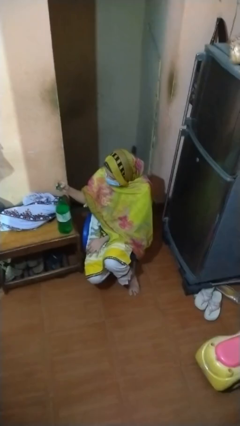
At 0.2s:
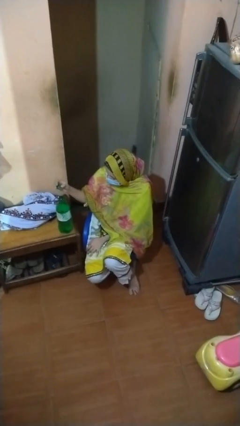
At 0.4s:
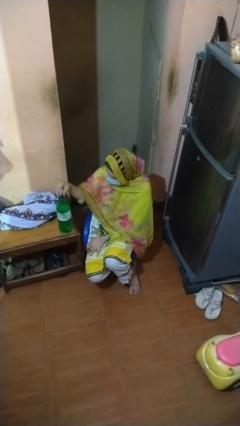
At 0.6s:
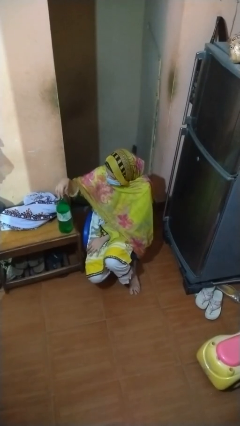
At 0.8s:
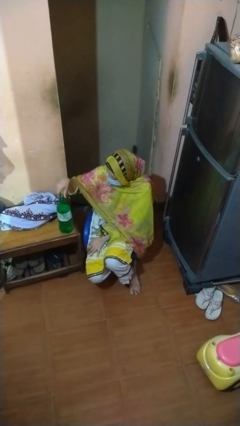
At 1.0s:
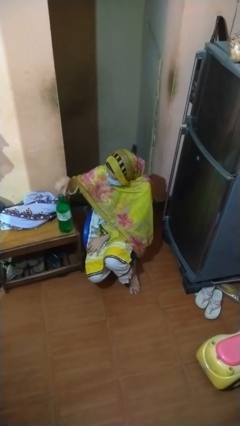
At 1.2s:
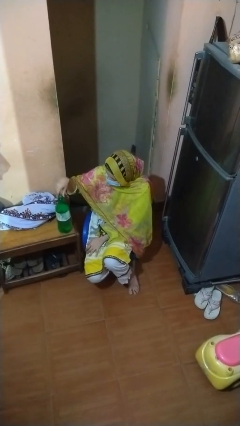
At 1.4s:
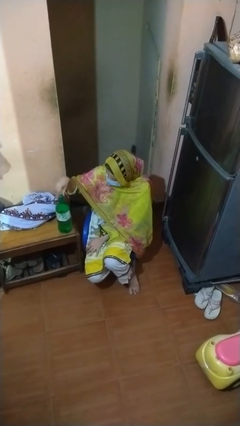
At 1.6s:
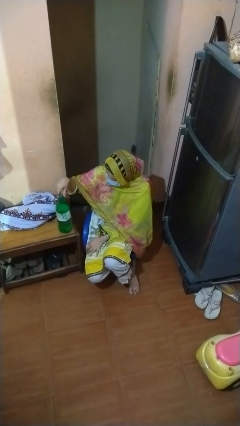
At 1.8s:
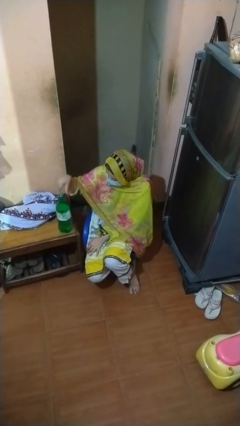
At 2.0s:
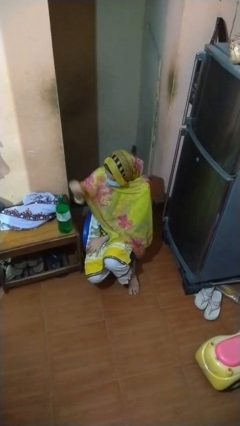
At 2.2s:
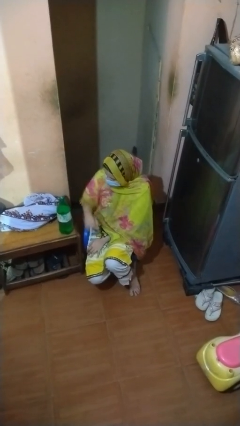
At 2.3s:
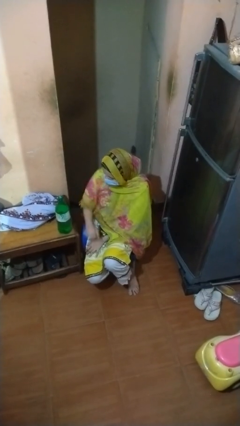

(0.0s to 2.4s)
person screws lid to bottle

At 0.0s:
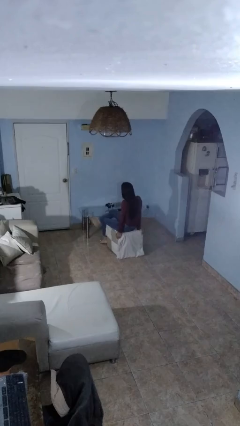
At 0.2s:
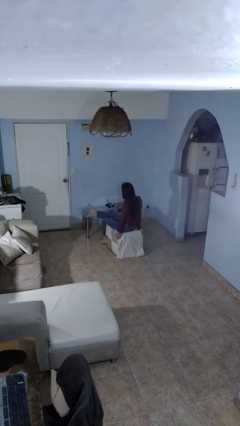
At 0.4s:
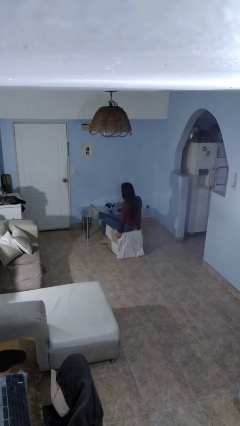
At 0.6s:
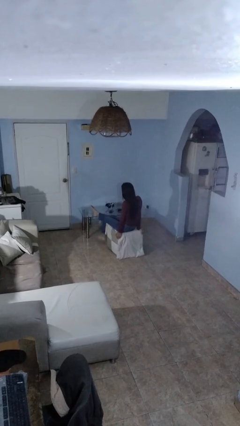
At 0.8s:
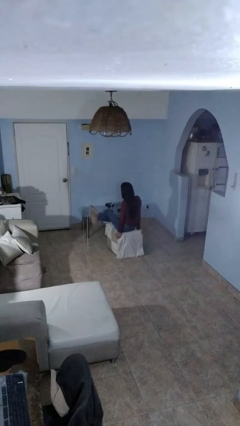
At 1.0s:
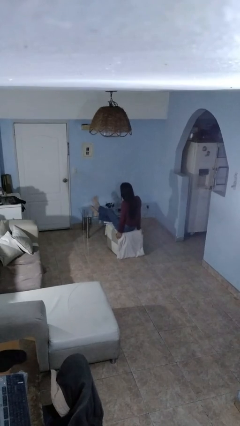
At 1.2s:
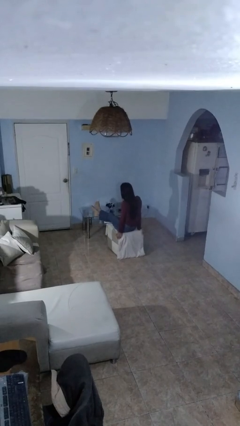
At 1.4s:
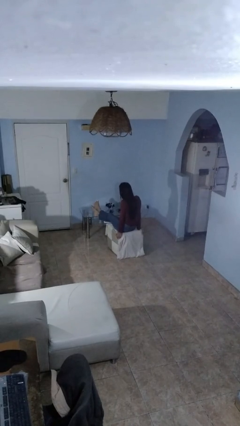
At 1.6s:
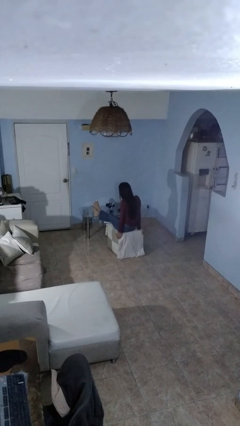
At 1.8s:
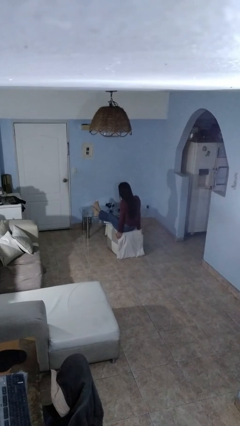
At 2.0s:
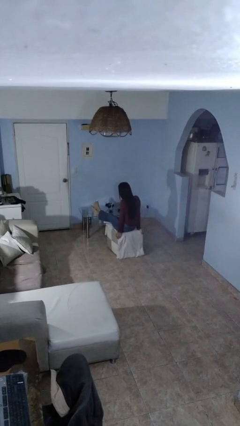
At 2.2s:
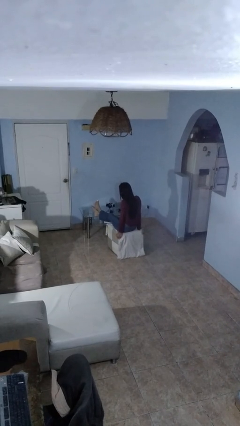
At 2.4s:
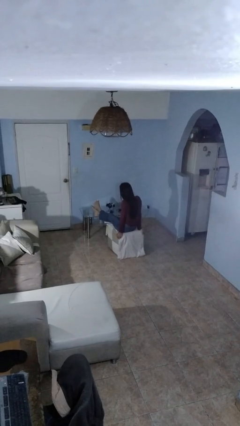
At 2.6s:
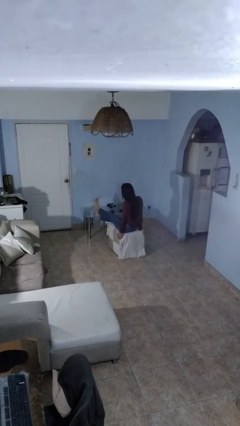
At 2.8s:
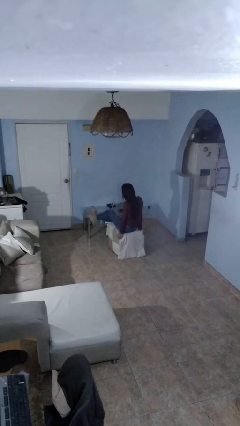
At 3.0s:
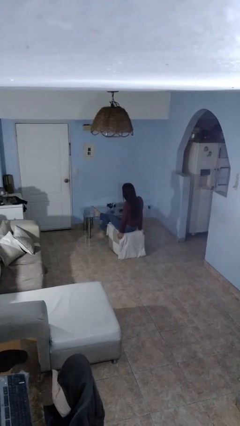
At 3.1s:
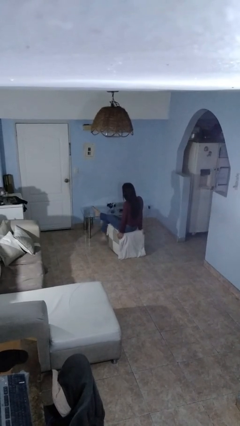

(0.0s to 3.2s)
person puts feet up

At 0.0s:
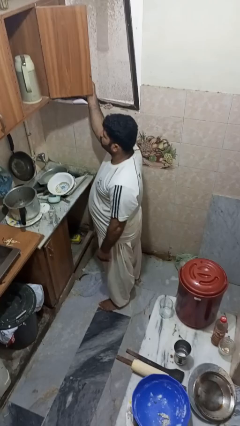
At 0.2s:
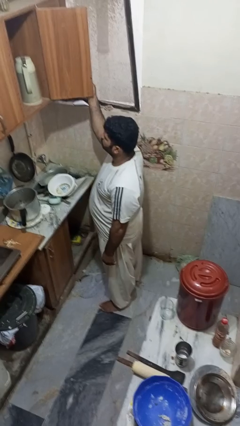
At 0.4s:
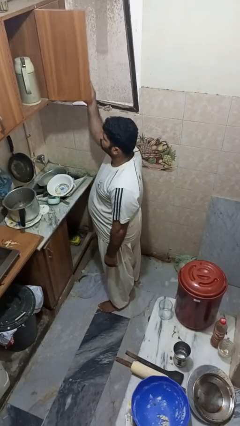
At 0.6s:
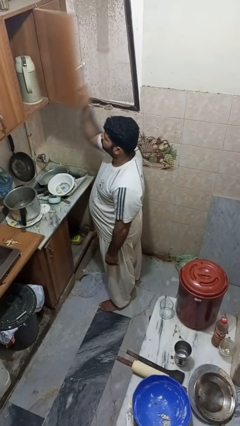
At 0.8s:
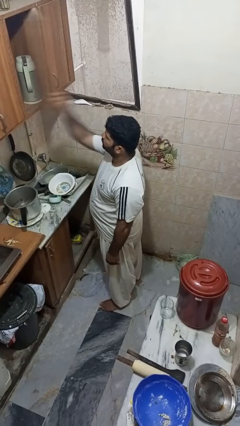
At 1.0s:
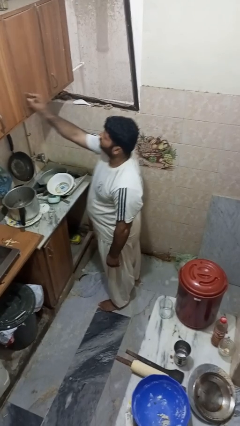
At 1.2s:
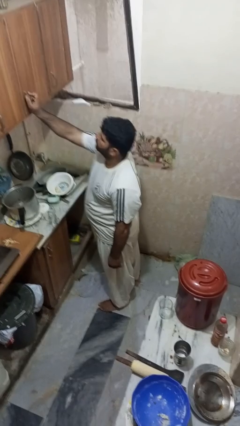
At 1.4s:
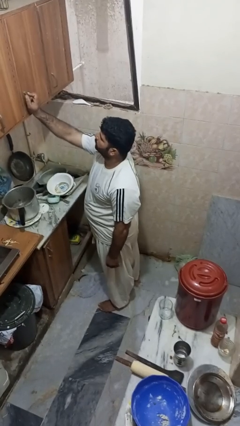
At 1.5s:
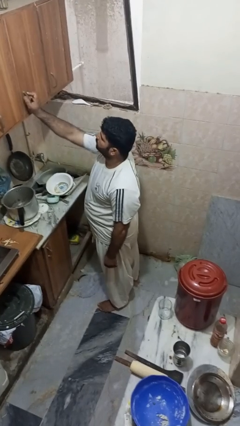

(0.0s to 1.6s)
person closes cabinet

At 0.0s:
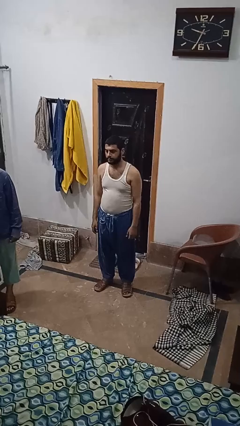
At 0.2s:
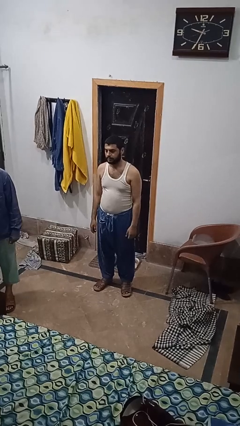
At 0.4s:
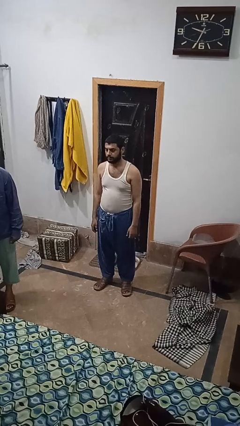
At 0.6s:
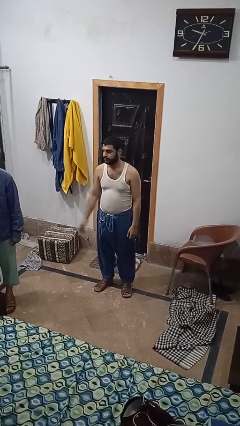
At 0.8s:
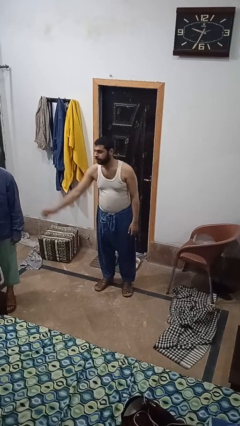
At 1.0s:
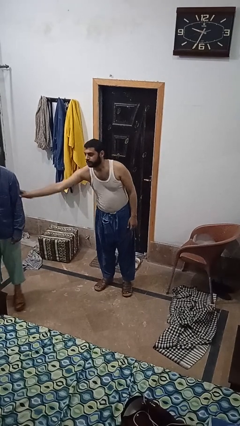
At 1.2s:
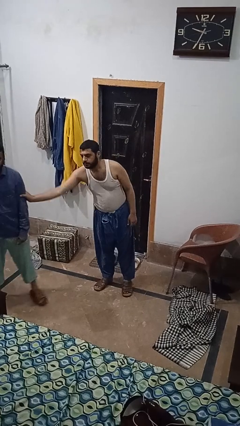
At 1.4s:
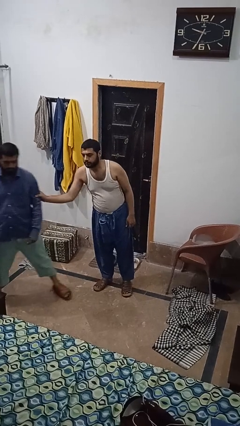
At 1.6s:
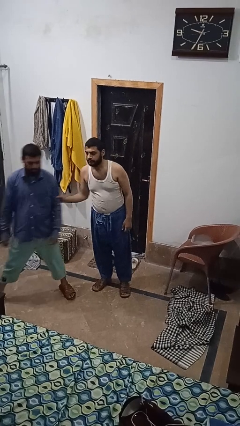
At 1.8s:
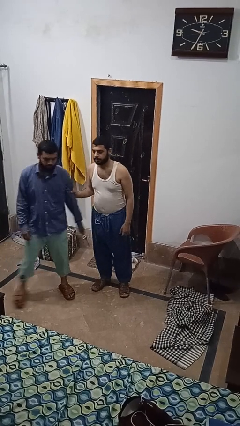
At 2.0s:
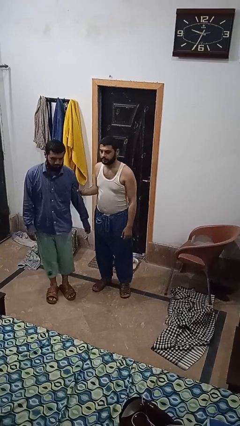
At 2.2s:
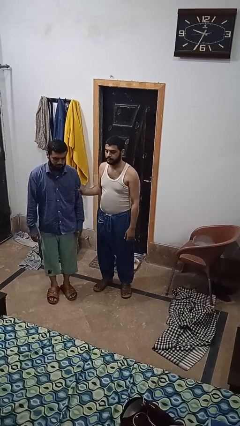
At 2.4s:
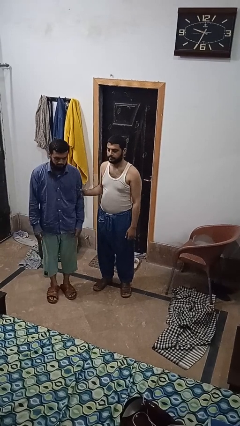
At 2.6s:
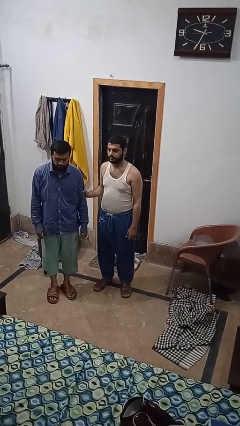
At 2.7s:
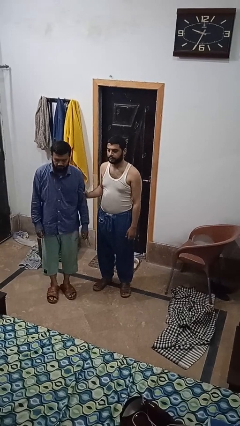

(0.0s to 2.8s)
person grabs person by bicep

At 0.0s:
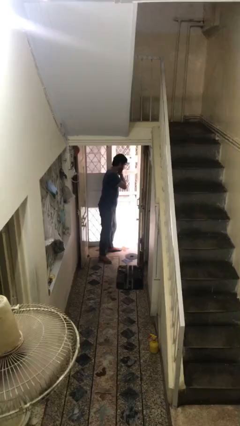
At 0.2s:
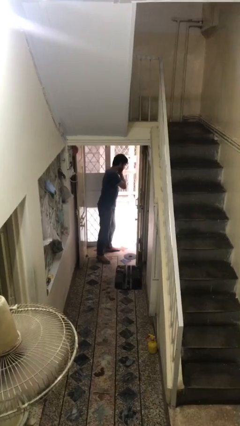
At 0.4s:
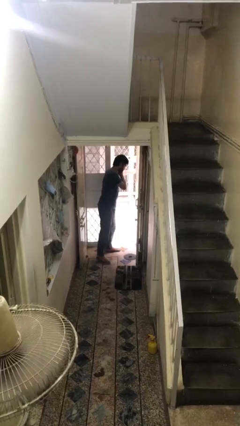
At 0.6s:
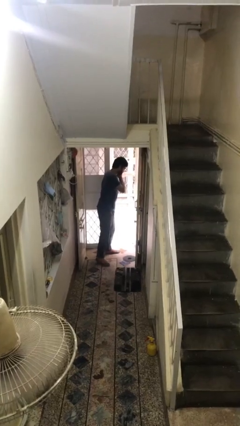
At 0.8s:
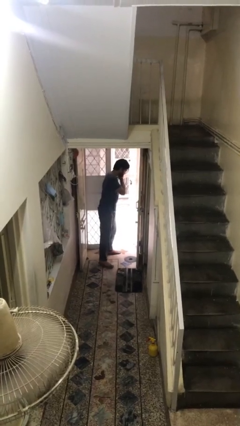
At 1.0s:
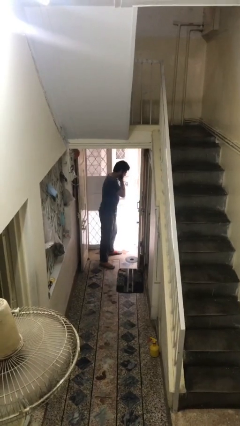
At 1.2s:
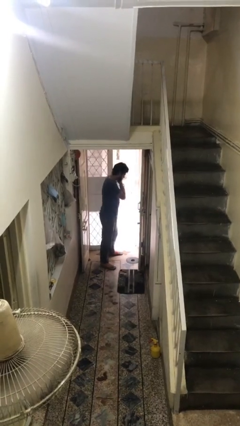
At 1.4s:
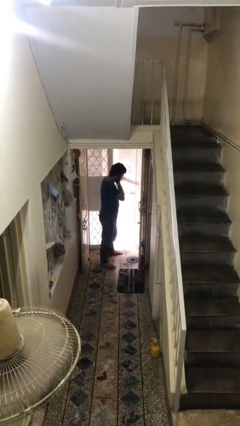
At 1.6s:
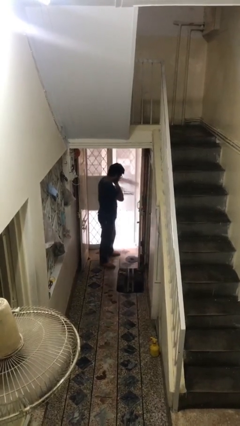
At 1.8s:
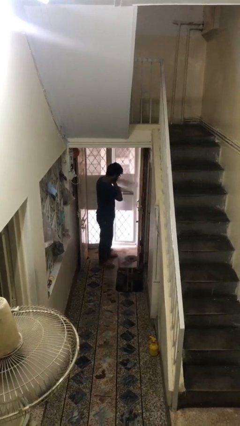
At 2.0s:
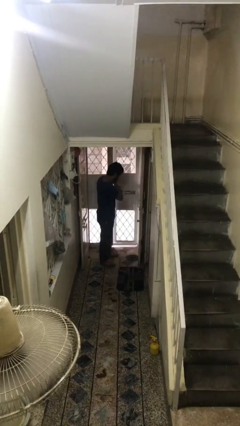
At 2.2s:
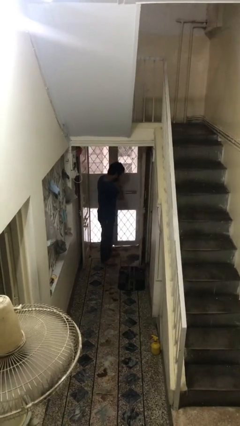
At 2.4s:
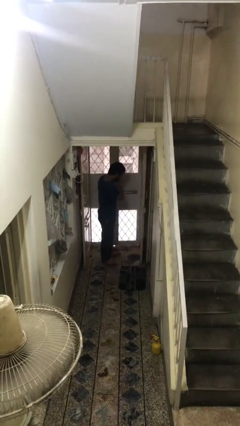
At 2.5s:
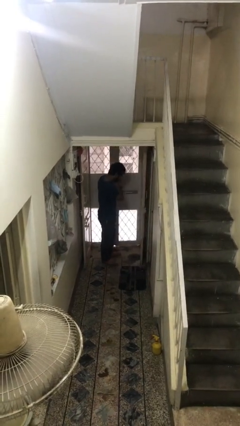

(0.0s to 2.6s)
person closes facility door

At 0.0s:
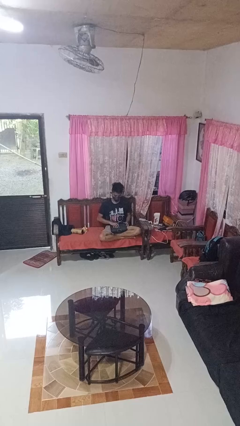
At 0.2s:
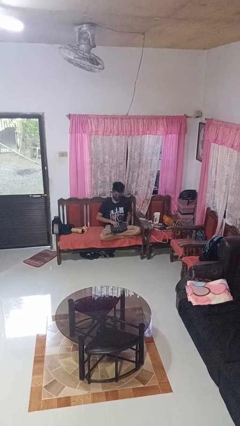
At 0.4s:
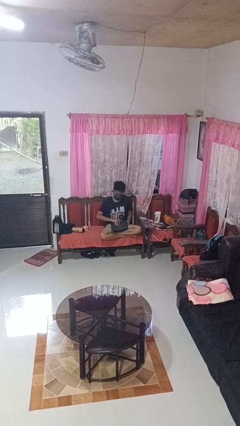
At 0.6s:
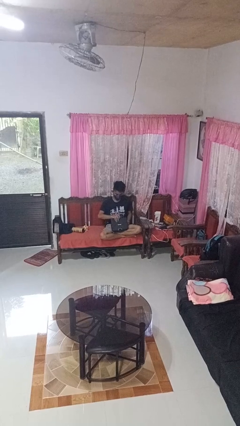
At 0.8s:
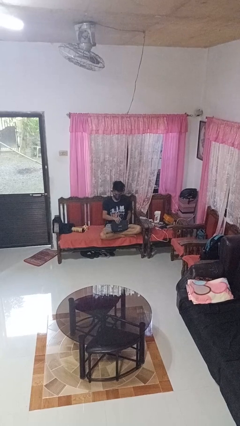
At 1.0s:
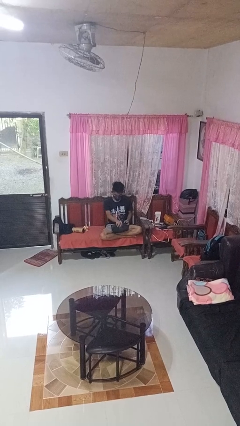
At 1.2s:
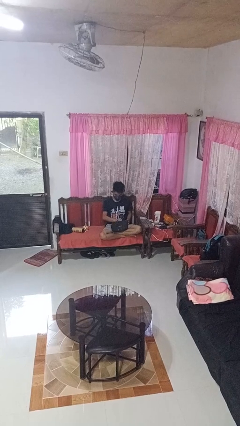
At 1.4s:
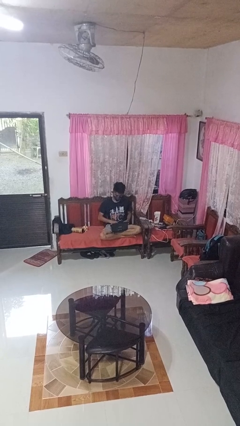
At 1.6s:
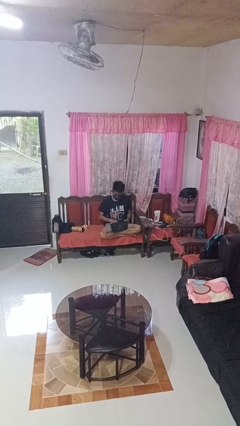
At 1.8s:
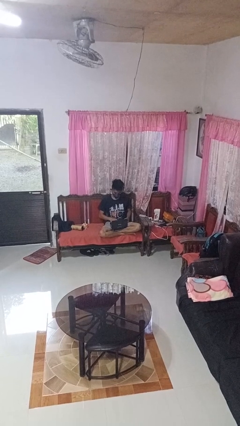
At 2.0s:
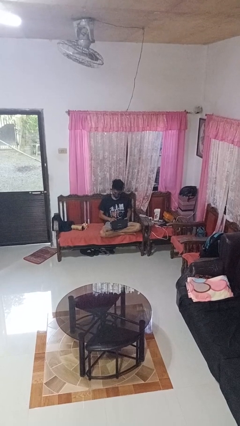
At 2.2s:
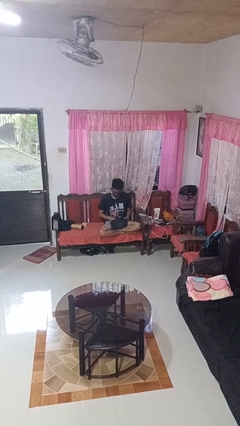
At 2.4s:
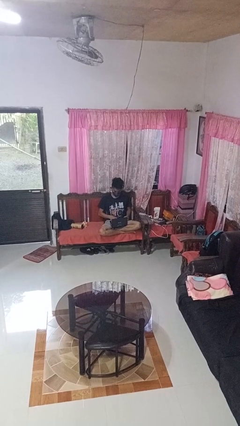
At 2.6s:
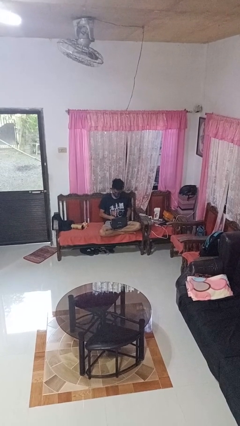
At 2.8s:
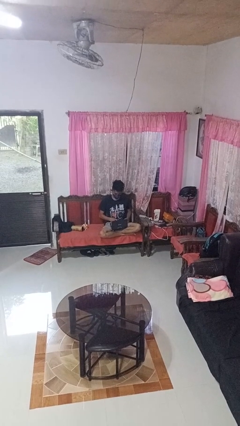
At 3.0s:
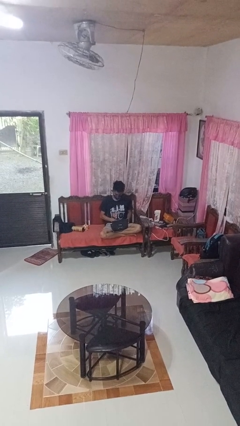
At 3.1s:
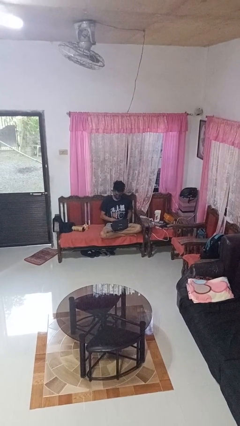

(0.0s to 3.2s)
person opens laptop

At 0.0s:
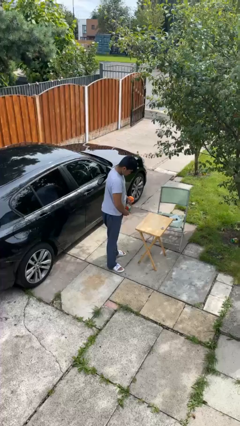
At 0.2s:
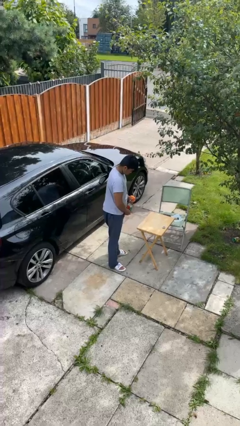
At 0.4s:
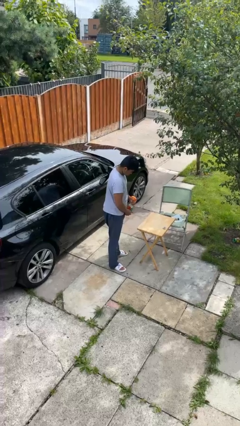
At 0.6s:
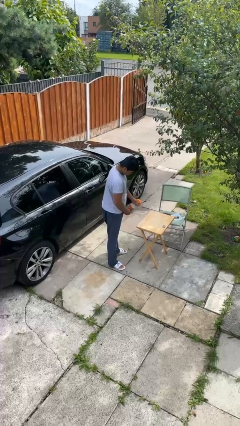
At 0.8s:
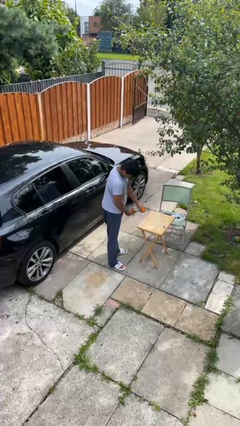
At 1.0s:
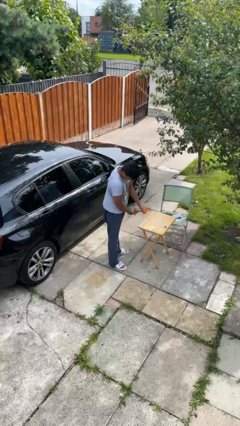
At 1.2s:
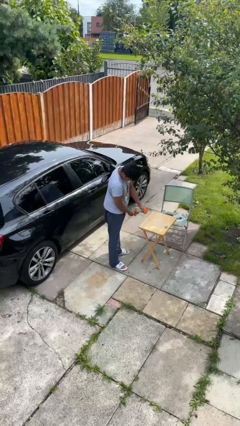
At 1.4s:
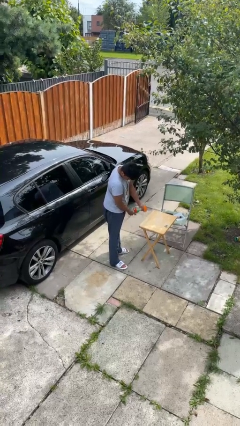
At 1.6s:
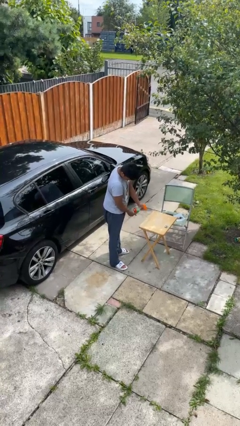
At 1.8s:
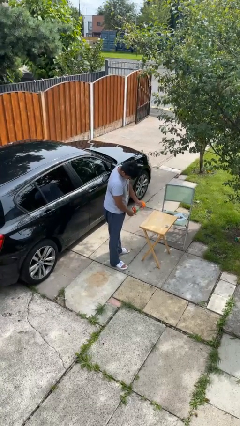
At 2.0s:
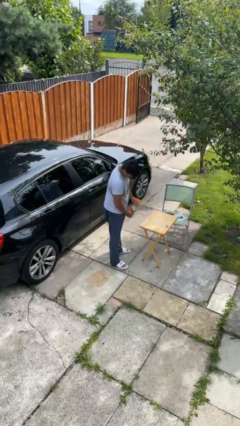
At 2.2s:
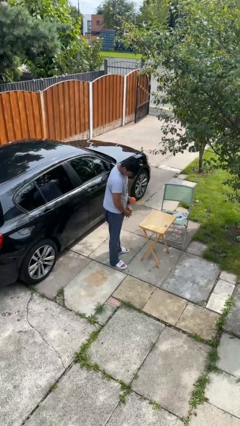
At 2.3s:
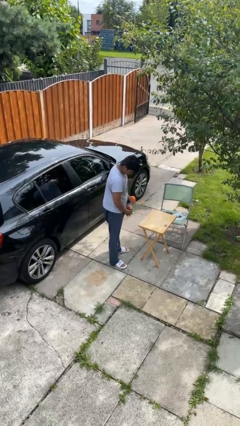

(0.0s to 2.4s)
person sprays from bottle
